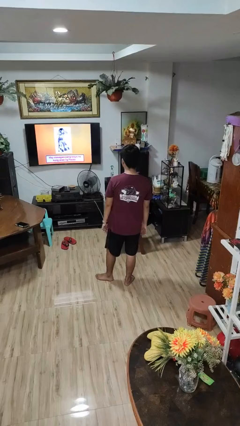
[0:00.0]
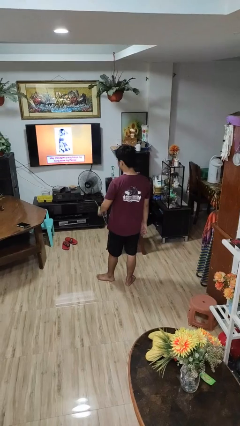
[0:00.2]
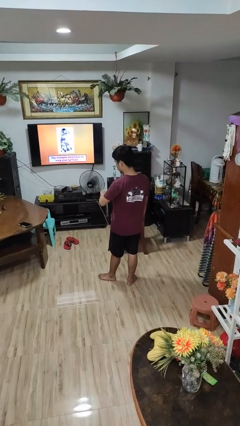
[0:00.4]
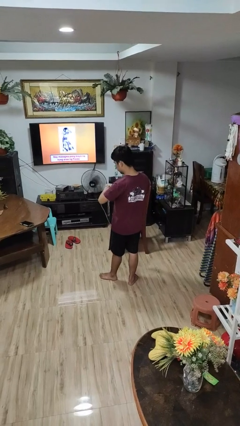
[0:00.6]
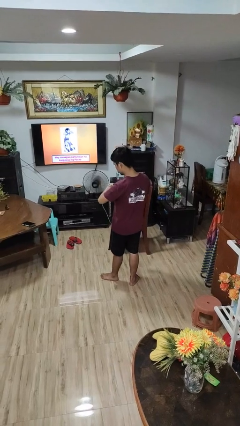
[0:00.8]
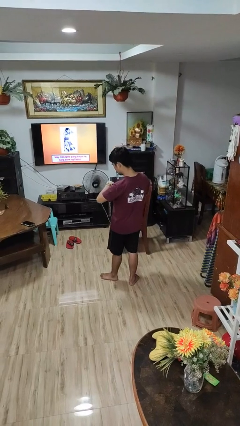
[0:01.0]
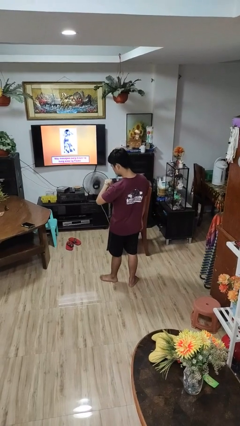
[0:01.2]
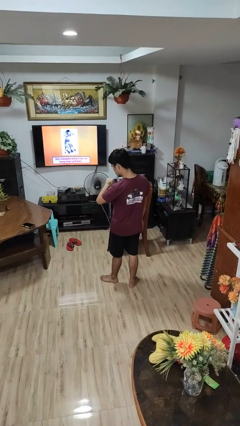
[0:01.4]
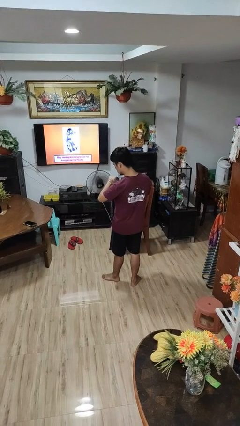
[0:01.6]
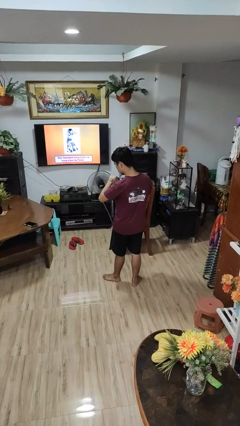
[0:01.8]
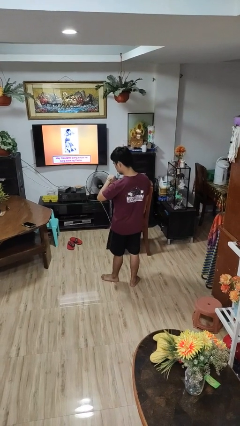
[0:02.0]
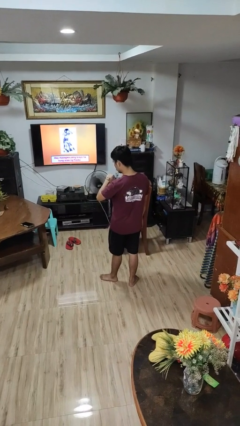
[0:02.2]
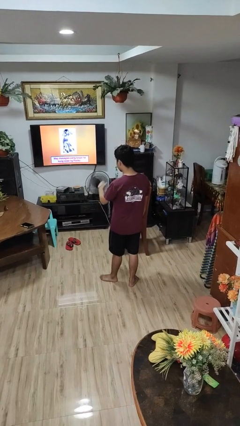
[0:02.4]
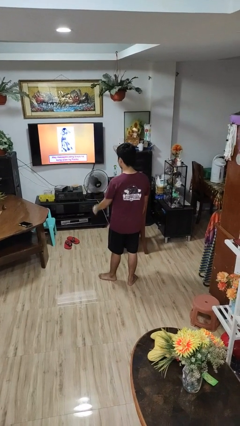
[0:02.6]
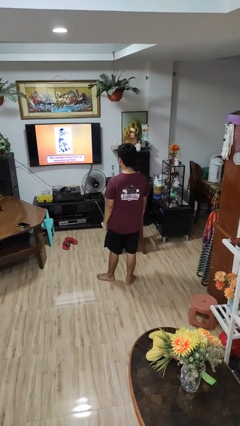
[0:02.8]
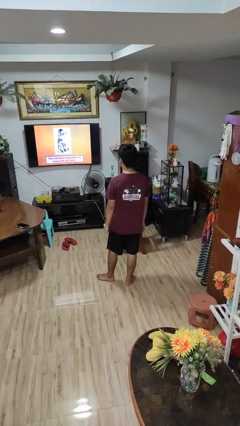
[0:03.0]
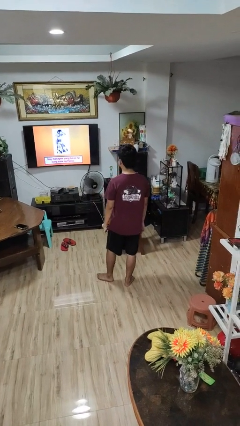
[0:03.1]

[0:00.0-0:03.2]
person looks at wristwatch

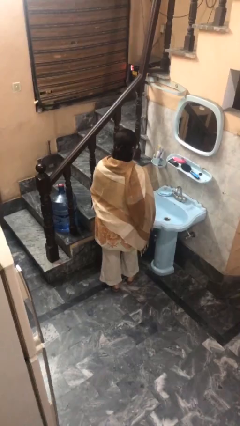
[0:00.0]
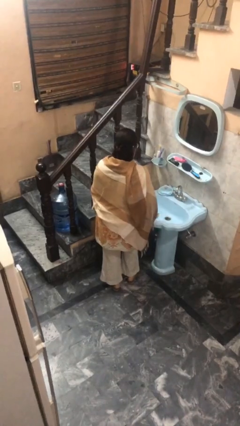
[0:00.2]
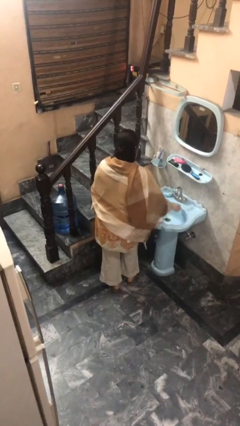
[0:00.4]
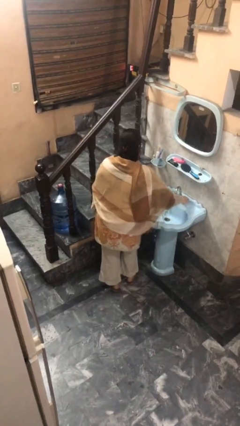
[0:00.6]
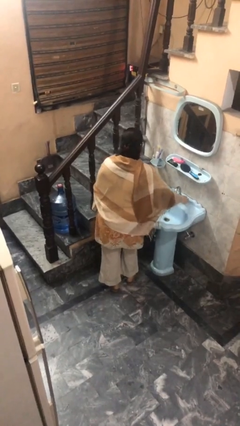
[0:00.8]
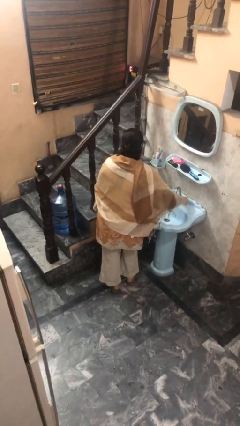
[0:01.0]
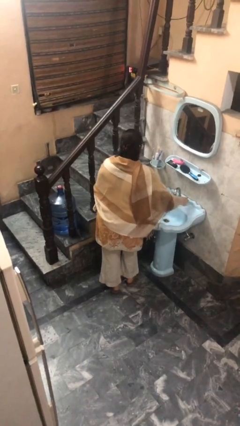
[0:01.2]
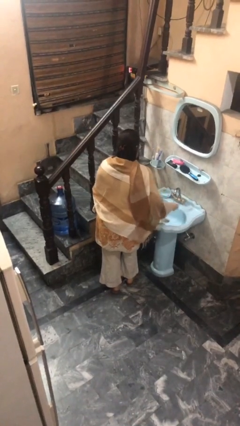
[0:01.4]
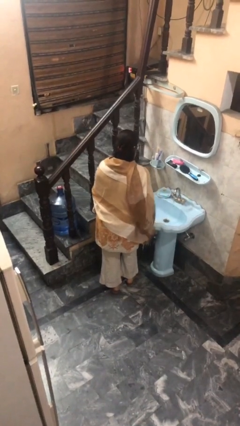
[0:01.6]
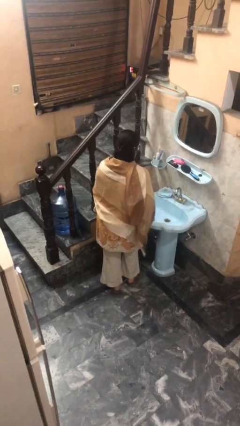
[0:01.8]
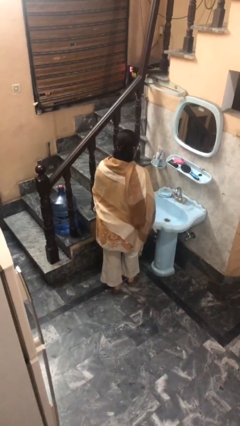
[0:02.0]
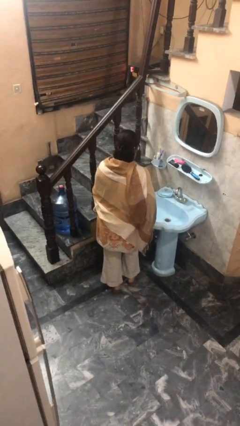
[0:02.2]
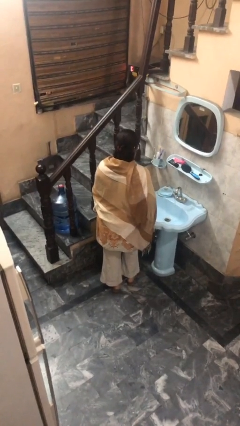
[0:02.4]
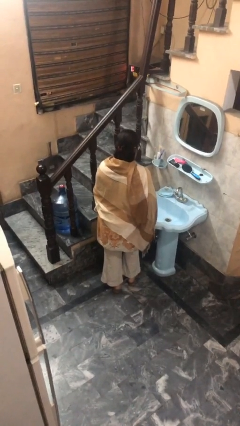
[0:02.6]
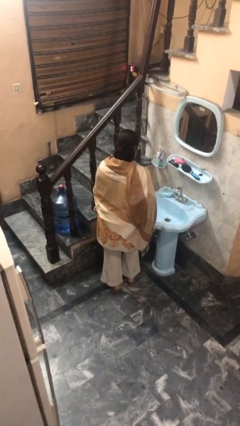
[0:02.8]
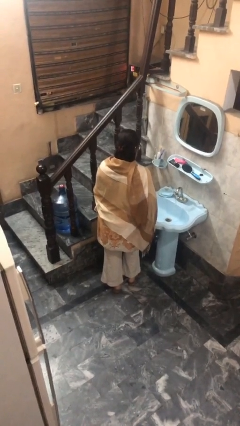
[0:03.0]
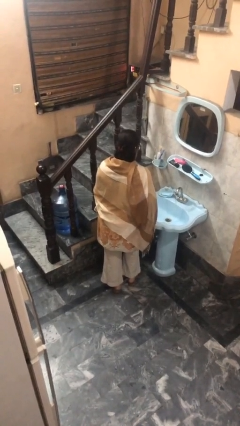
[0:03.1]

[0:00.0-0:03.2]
person turns on faucet

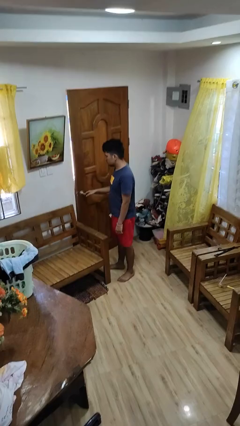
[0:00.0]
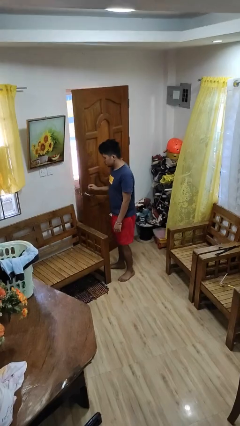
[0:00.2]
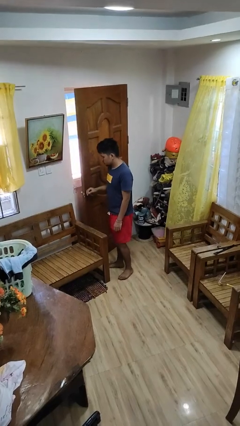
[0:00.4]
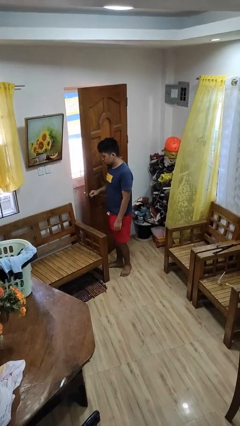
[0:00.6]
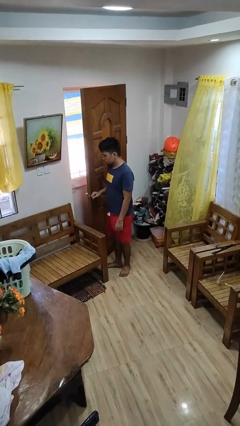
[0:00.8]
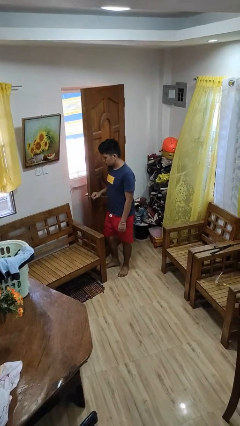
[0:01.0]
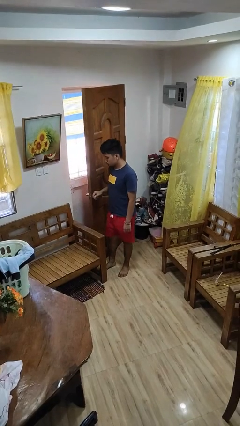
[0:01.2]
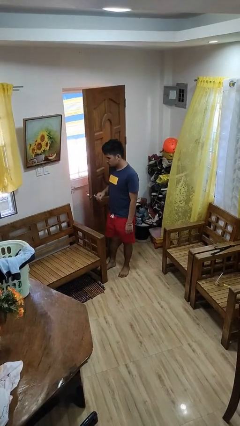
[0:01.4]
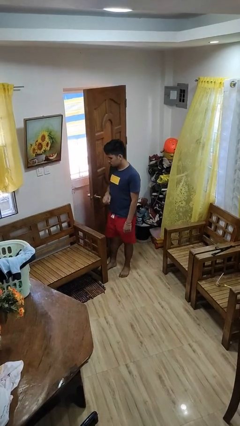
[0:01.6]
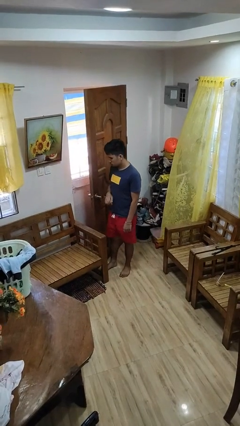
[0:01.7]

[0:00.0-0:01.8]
person opens facility door

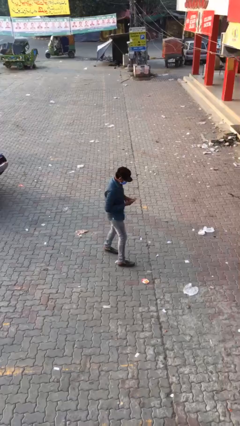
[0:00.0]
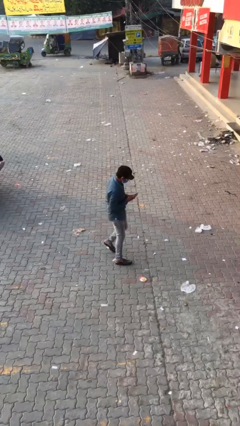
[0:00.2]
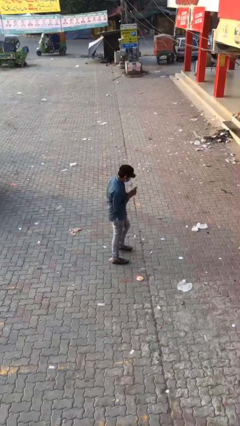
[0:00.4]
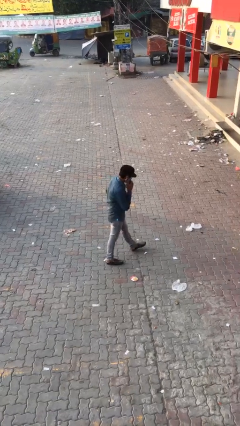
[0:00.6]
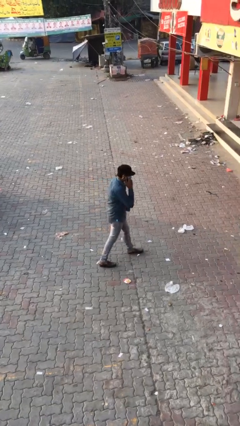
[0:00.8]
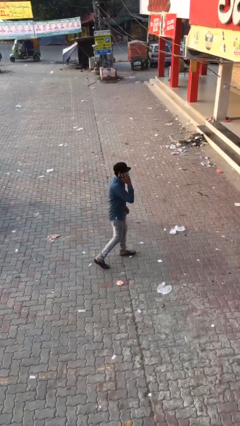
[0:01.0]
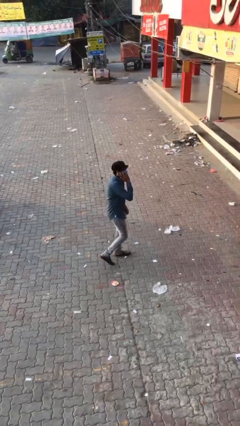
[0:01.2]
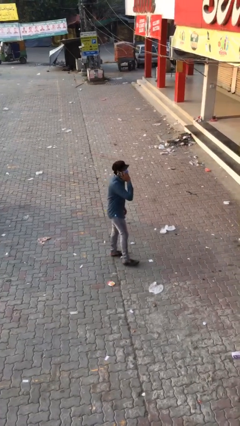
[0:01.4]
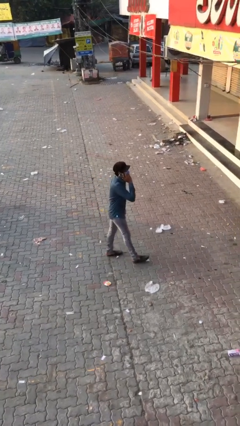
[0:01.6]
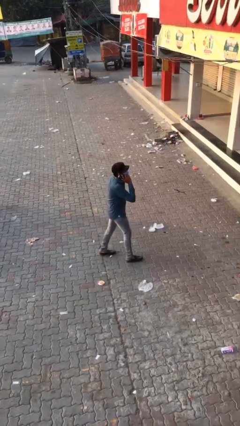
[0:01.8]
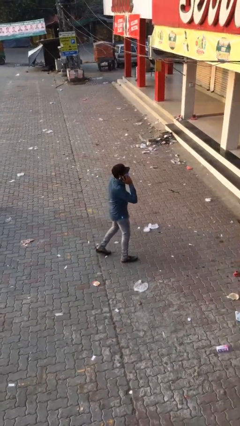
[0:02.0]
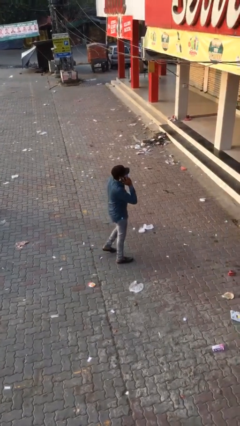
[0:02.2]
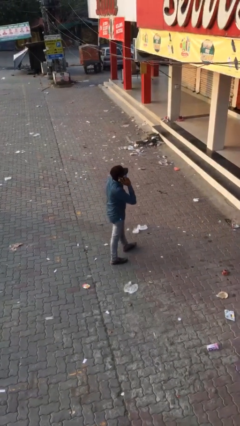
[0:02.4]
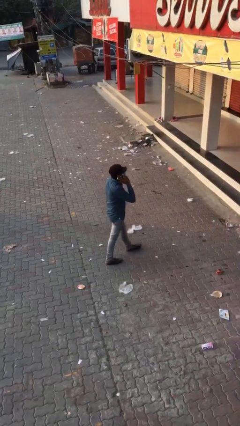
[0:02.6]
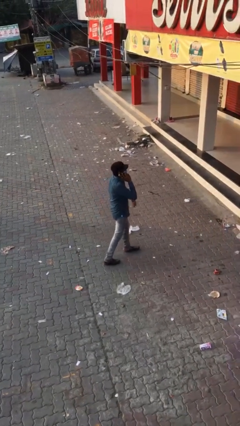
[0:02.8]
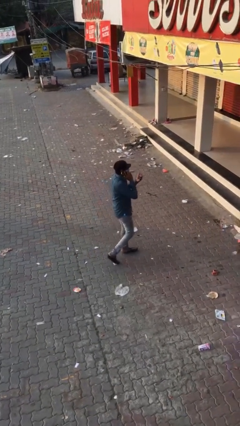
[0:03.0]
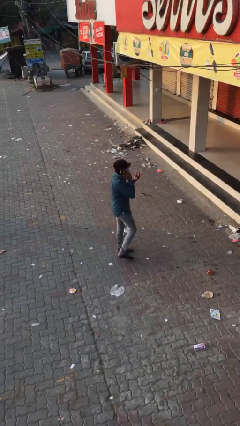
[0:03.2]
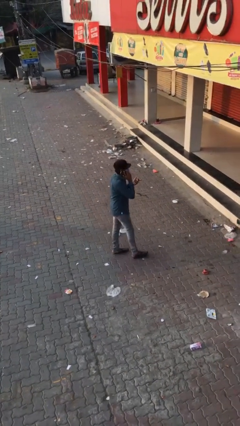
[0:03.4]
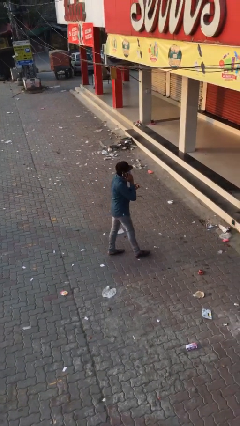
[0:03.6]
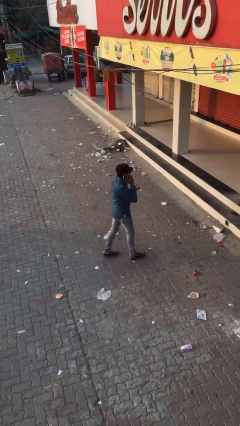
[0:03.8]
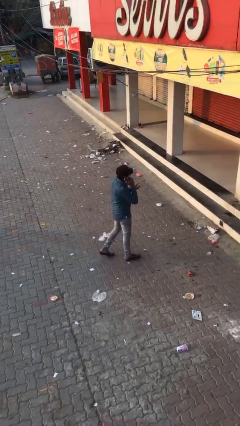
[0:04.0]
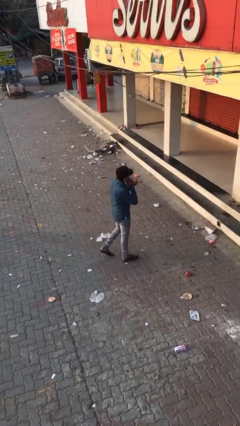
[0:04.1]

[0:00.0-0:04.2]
person talks on phone

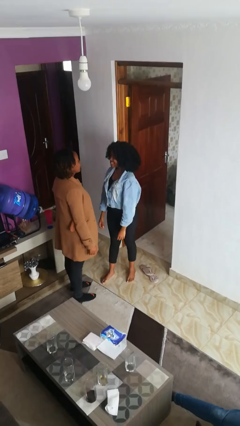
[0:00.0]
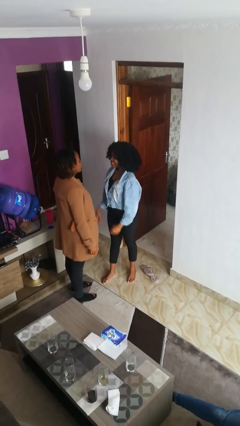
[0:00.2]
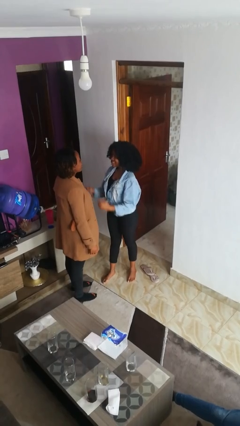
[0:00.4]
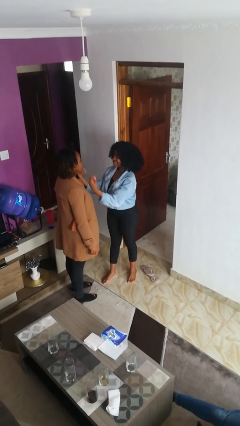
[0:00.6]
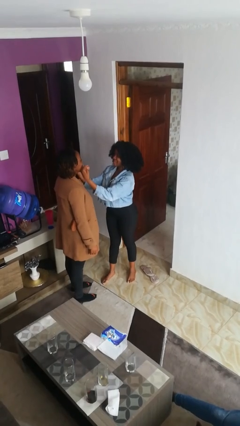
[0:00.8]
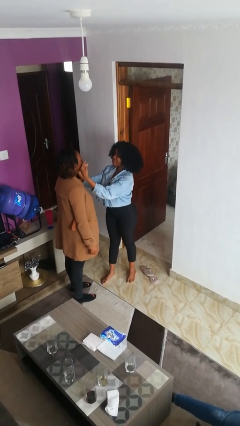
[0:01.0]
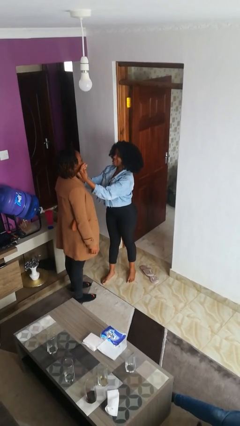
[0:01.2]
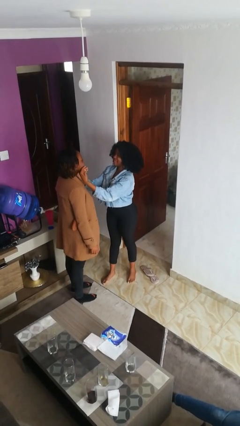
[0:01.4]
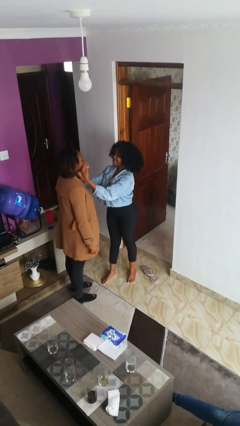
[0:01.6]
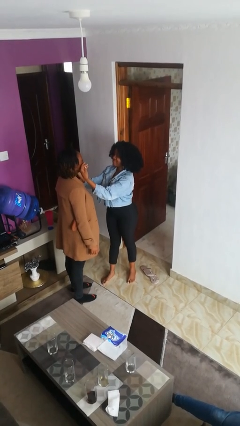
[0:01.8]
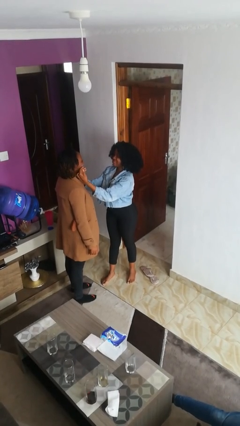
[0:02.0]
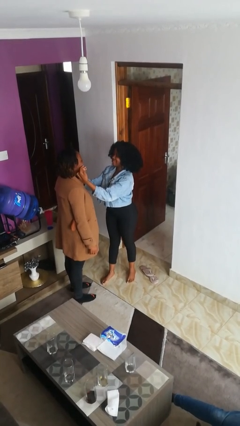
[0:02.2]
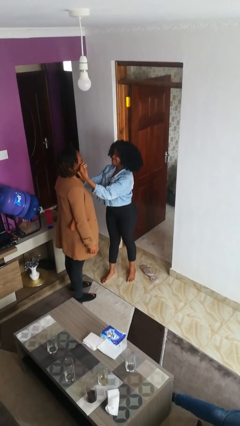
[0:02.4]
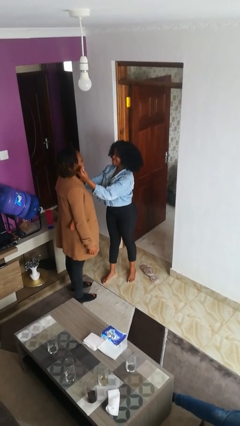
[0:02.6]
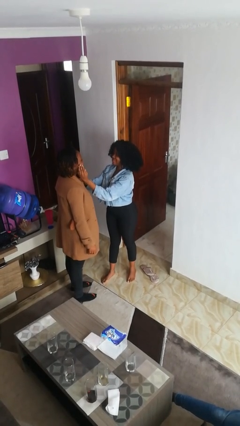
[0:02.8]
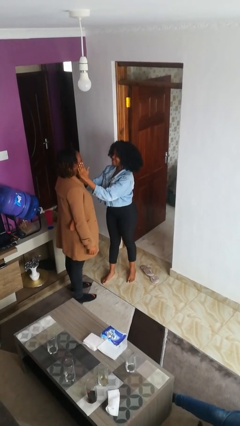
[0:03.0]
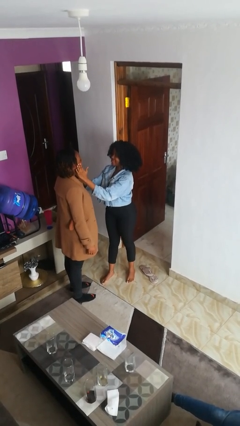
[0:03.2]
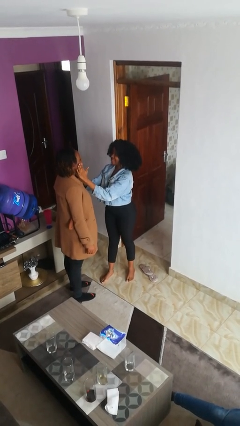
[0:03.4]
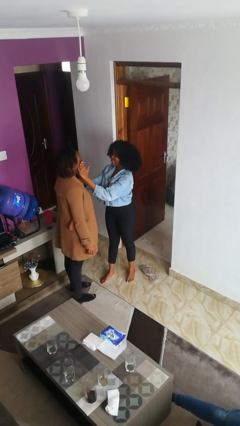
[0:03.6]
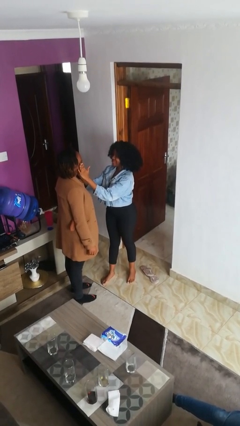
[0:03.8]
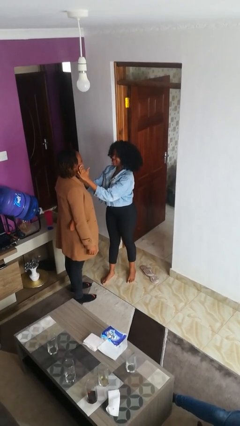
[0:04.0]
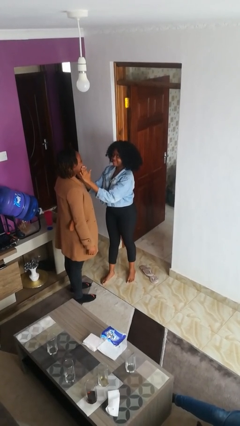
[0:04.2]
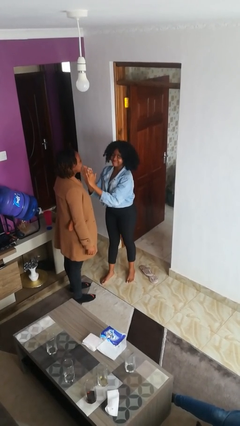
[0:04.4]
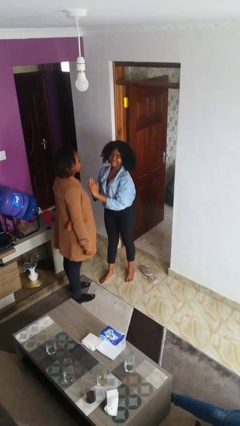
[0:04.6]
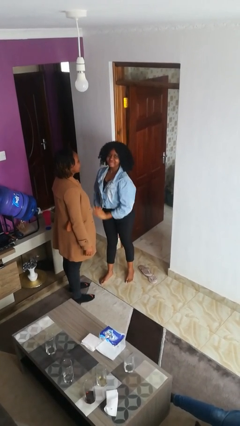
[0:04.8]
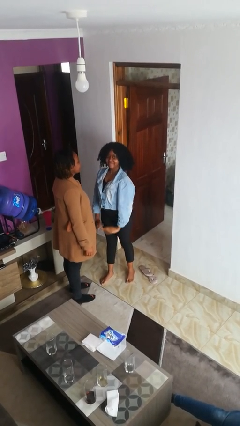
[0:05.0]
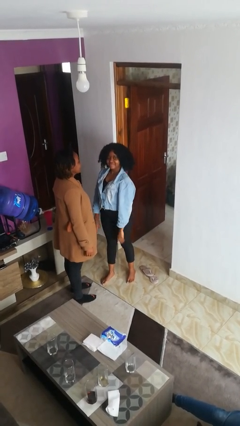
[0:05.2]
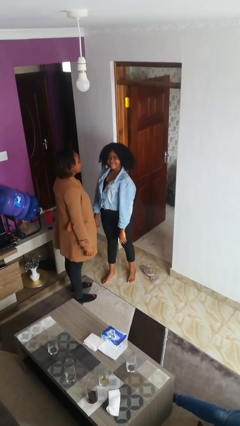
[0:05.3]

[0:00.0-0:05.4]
person touches face of person
